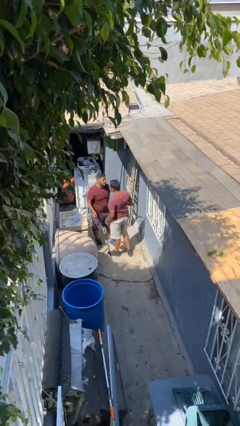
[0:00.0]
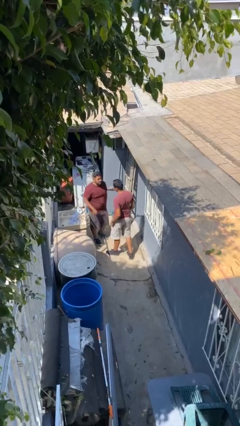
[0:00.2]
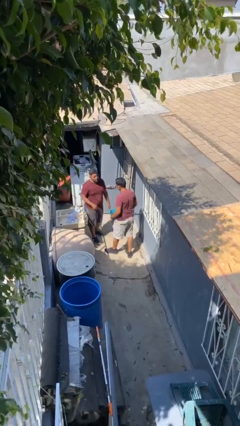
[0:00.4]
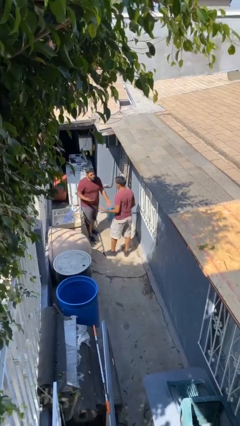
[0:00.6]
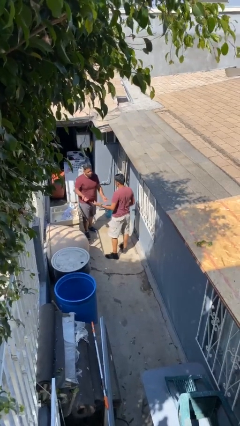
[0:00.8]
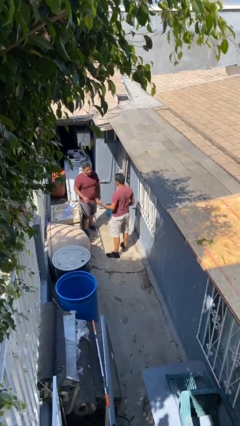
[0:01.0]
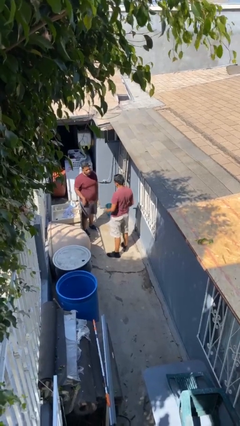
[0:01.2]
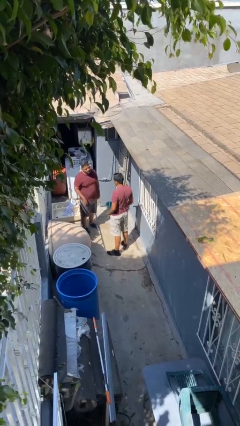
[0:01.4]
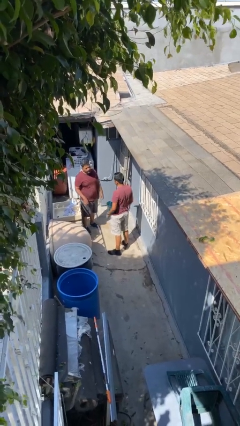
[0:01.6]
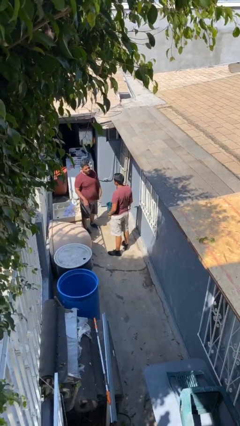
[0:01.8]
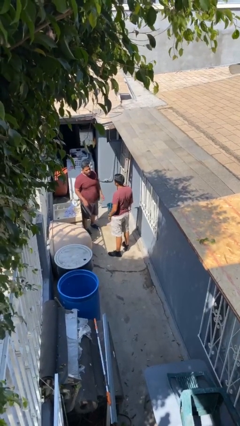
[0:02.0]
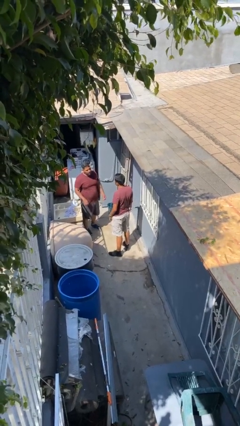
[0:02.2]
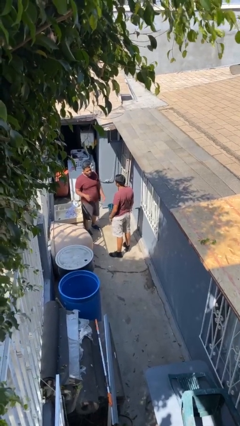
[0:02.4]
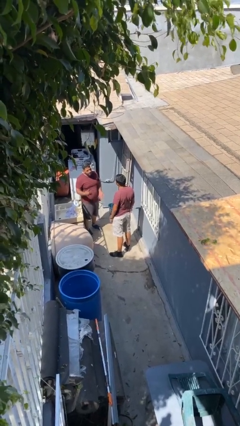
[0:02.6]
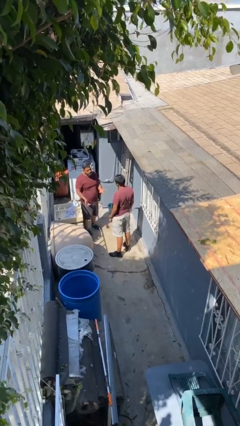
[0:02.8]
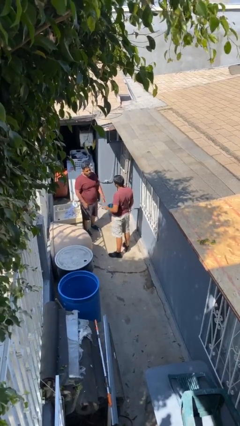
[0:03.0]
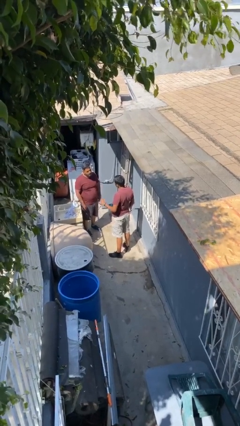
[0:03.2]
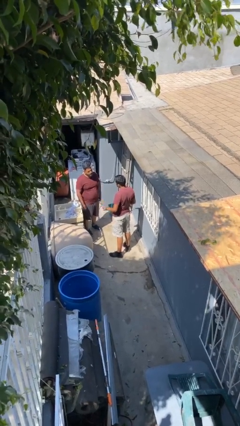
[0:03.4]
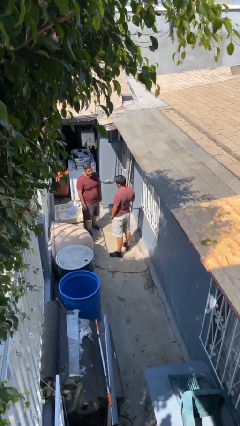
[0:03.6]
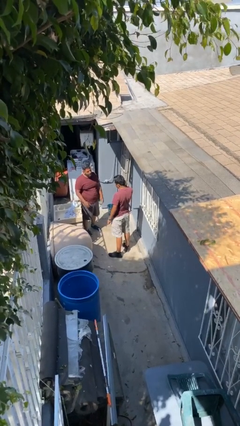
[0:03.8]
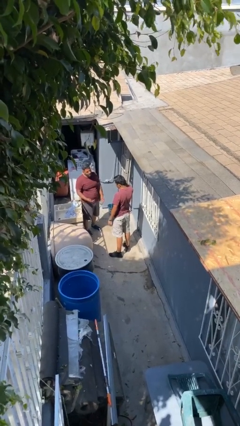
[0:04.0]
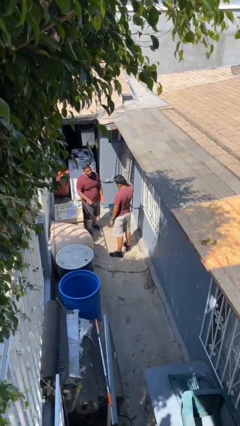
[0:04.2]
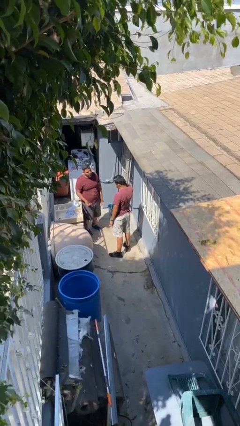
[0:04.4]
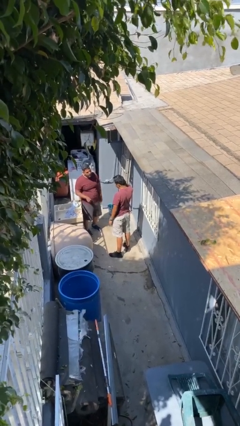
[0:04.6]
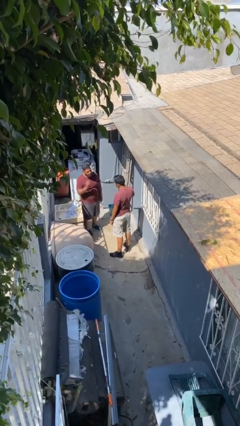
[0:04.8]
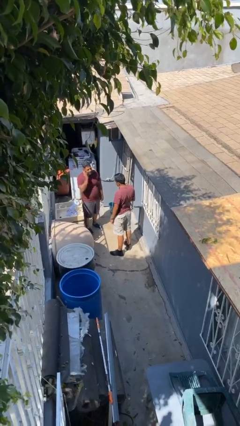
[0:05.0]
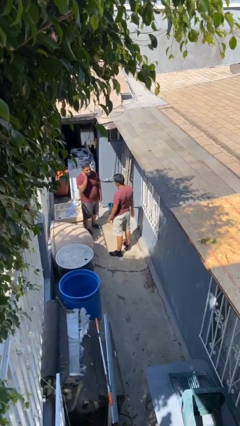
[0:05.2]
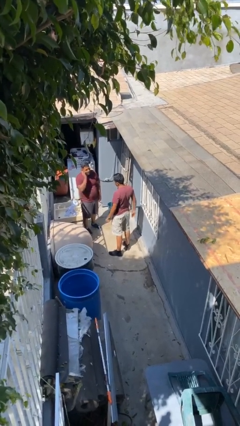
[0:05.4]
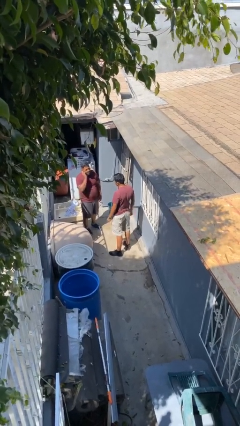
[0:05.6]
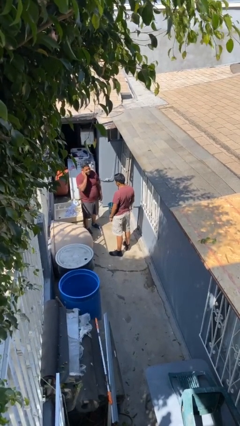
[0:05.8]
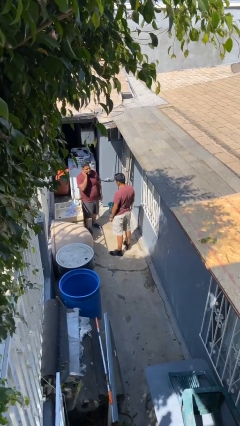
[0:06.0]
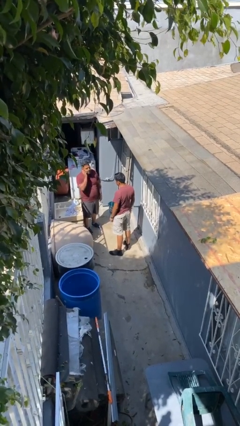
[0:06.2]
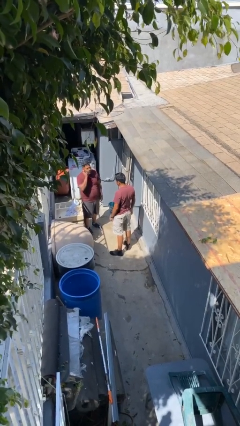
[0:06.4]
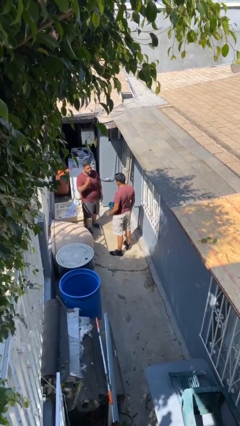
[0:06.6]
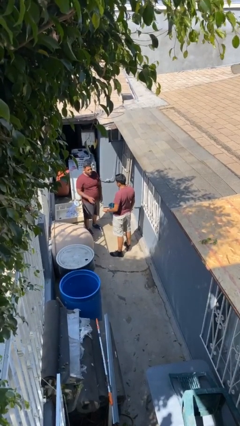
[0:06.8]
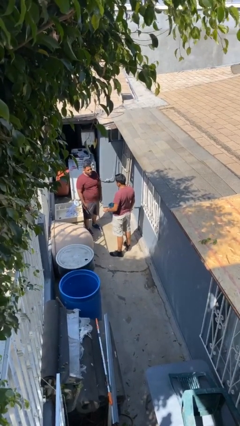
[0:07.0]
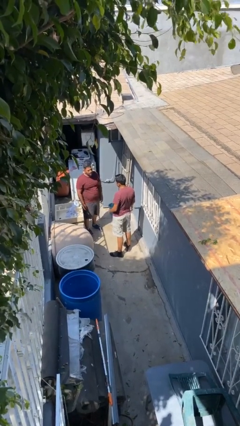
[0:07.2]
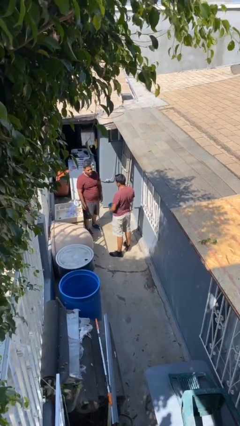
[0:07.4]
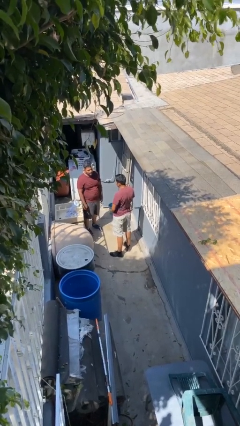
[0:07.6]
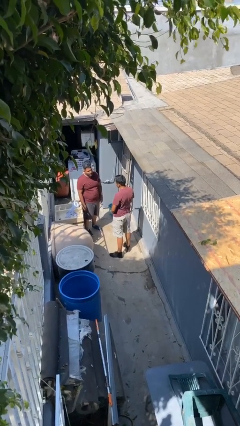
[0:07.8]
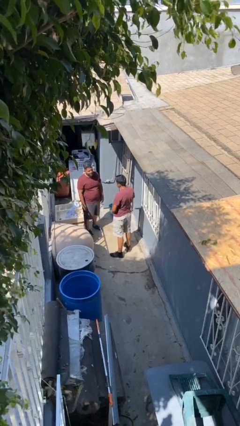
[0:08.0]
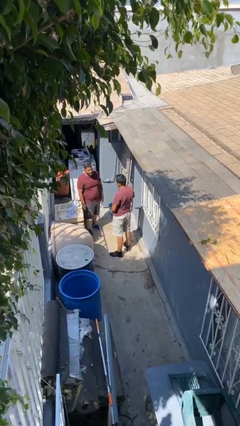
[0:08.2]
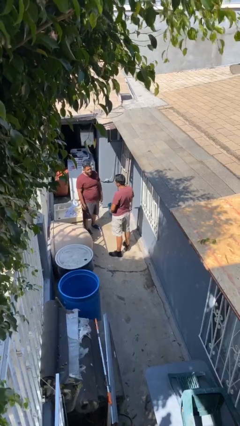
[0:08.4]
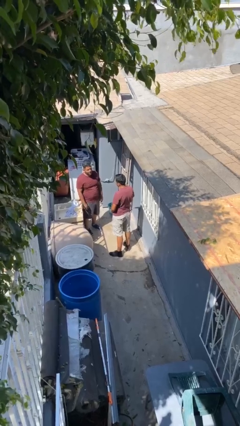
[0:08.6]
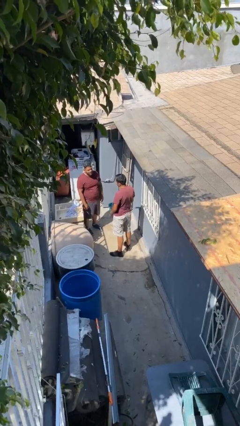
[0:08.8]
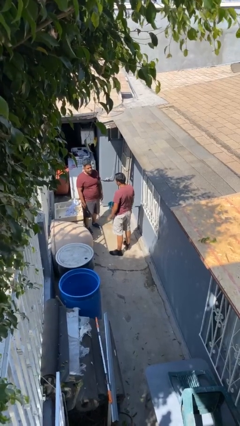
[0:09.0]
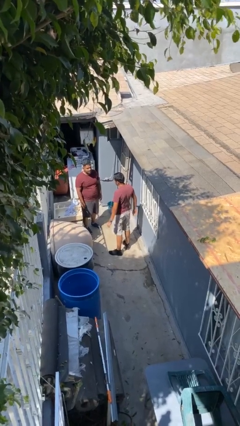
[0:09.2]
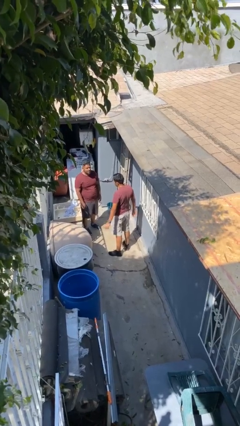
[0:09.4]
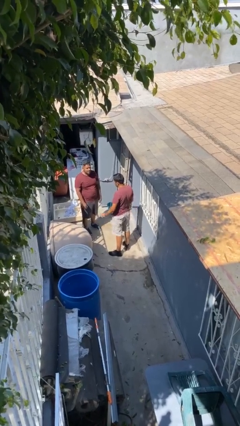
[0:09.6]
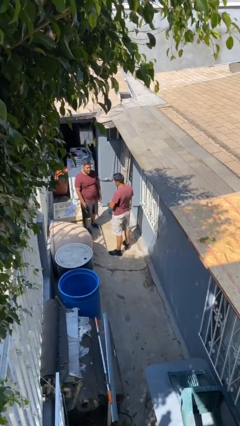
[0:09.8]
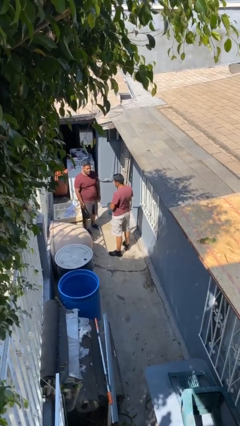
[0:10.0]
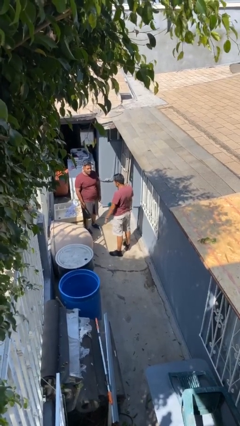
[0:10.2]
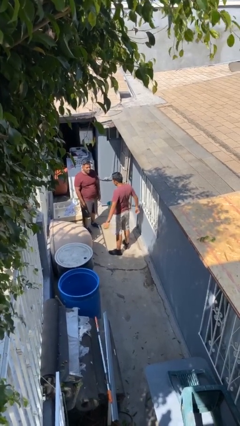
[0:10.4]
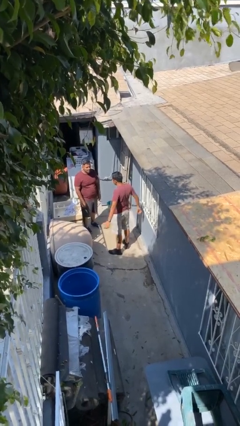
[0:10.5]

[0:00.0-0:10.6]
person talks to person

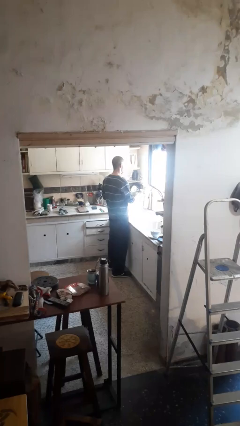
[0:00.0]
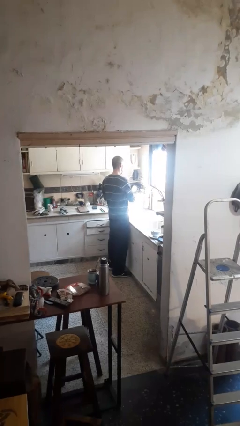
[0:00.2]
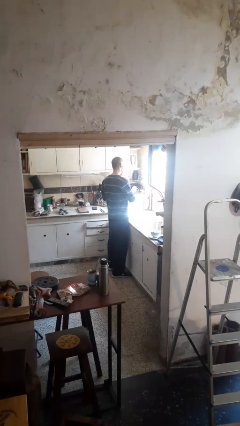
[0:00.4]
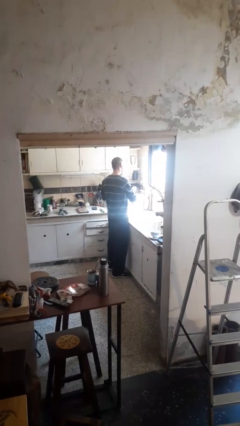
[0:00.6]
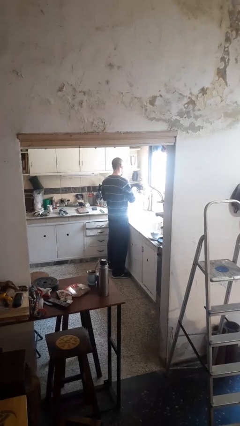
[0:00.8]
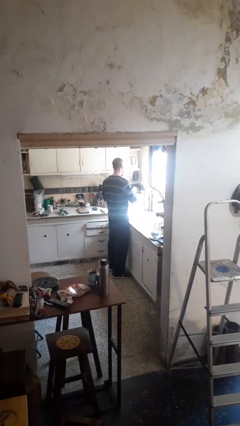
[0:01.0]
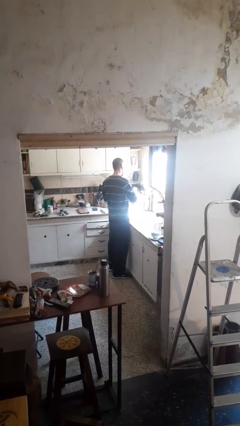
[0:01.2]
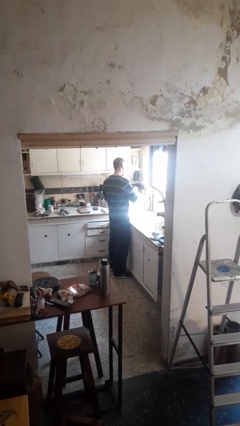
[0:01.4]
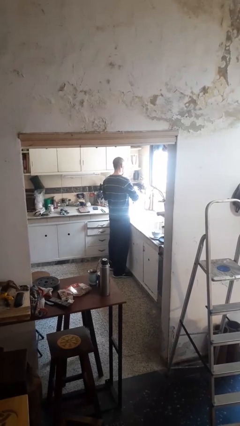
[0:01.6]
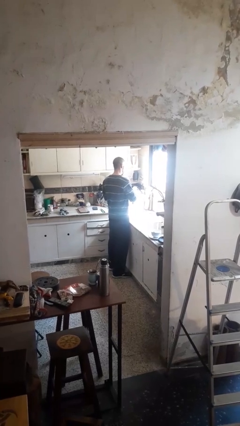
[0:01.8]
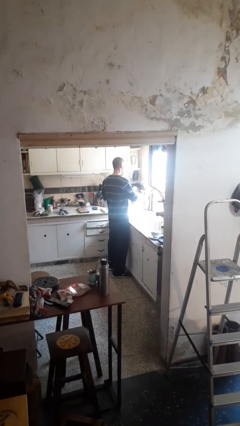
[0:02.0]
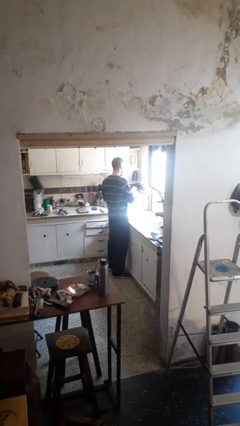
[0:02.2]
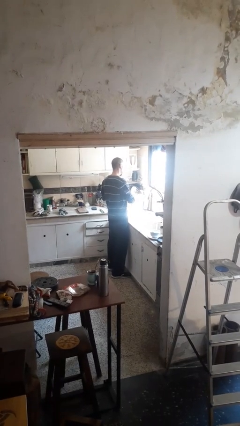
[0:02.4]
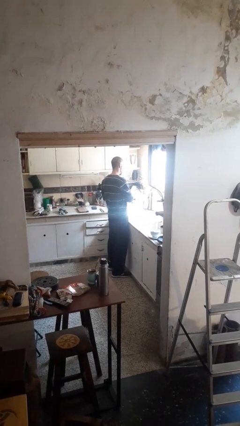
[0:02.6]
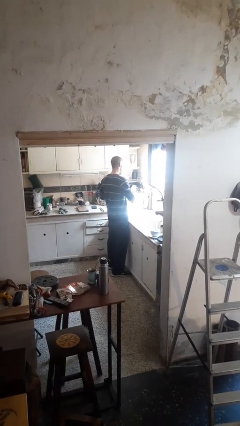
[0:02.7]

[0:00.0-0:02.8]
person washes dish

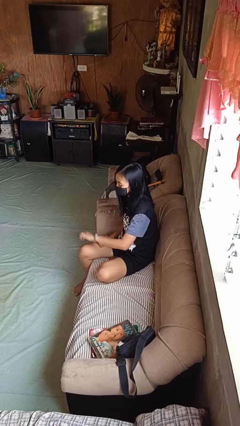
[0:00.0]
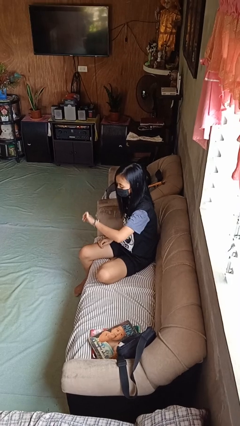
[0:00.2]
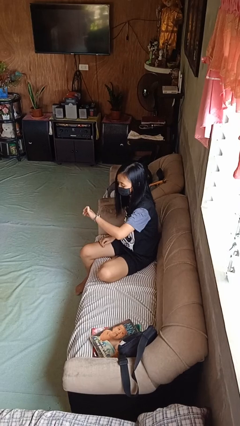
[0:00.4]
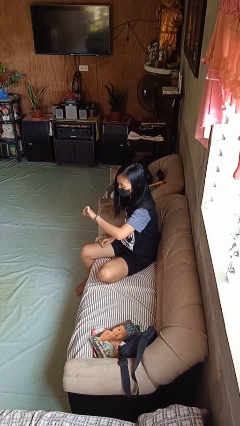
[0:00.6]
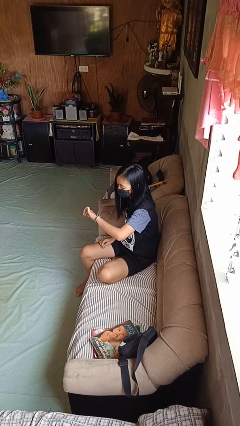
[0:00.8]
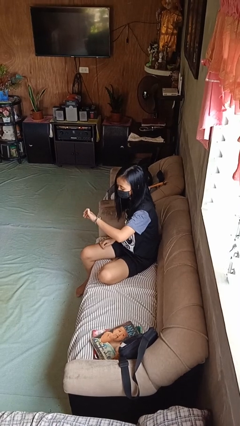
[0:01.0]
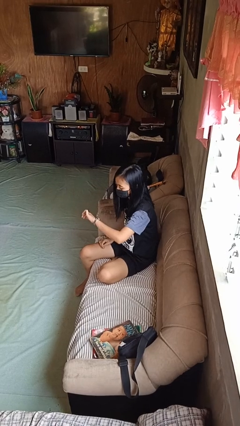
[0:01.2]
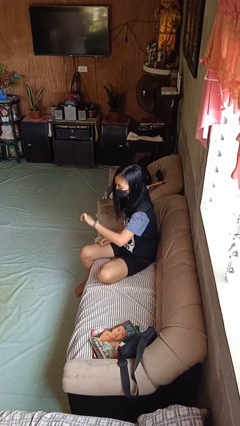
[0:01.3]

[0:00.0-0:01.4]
person looks at wristwatch

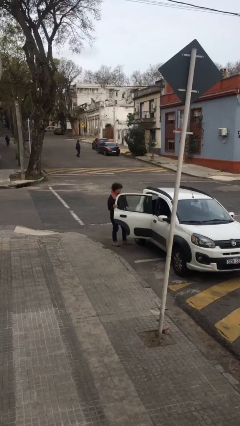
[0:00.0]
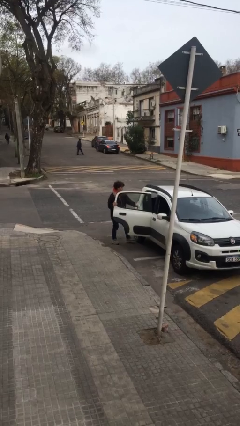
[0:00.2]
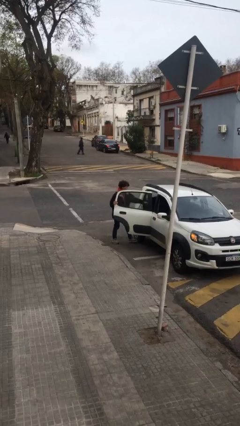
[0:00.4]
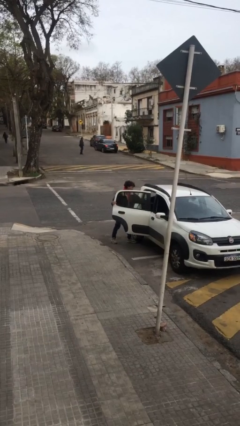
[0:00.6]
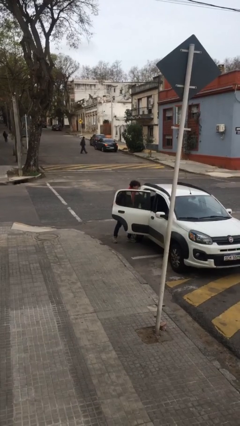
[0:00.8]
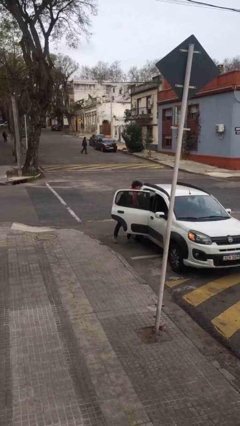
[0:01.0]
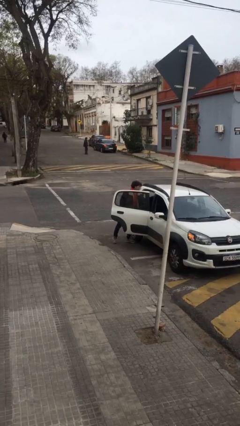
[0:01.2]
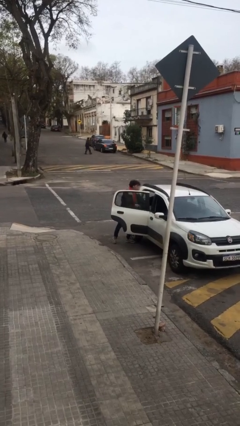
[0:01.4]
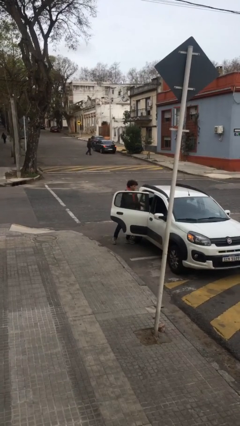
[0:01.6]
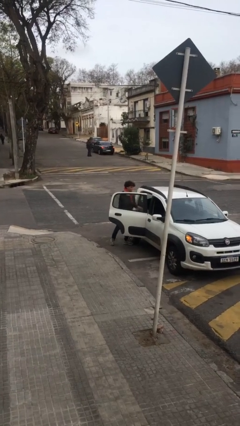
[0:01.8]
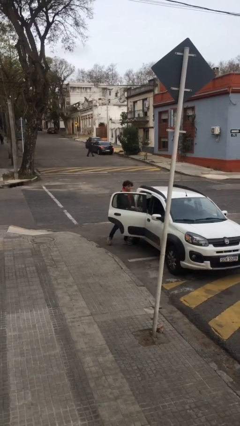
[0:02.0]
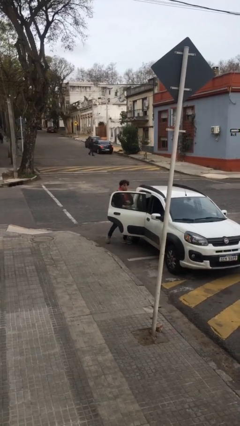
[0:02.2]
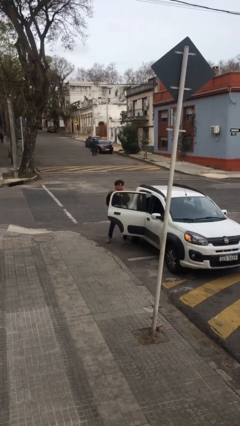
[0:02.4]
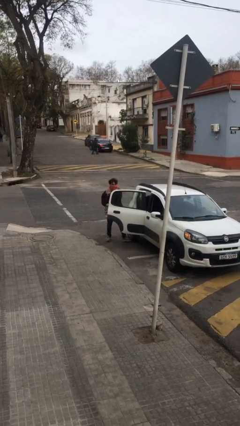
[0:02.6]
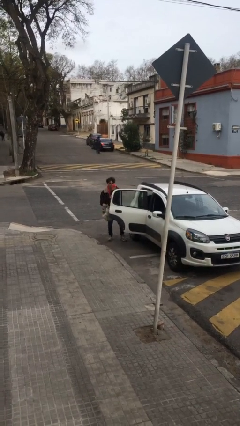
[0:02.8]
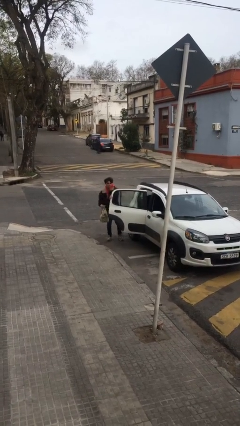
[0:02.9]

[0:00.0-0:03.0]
person unloads car
